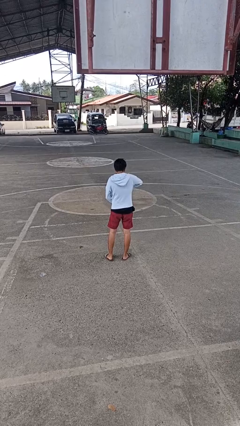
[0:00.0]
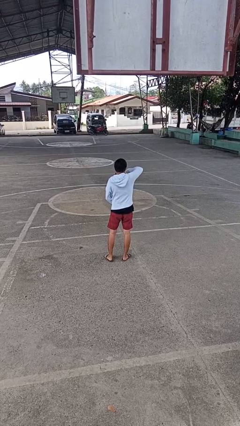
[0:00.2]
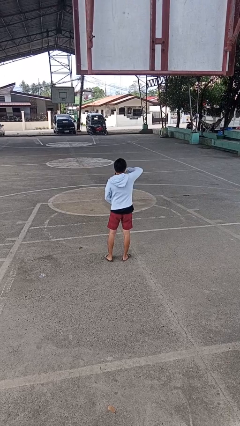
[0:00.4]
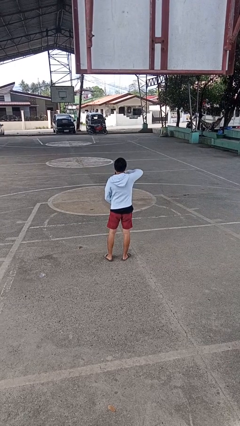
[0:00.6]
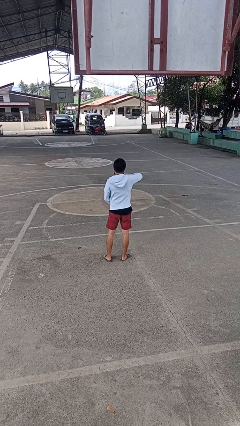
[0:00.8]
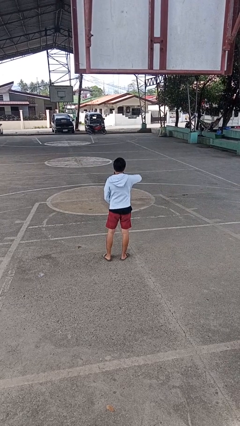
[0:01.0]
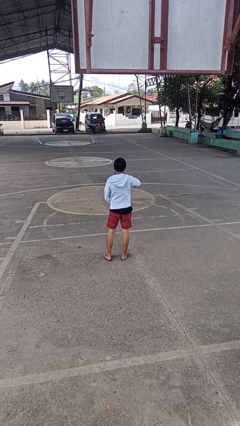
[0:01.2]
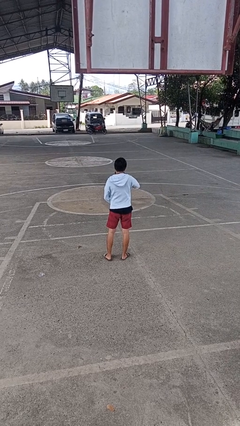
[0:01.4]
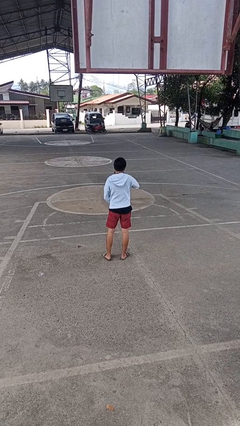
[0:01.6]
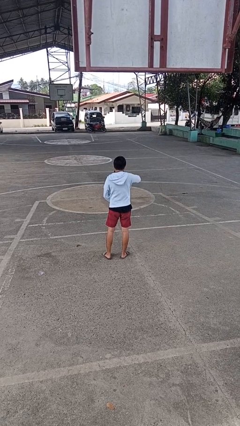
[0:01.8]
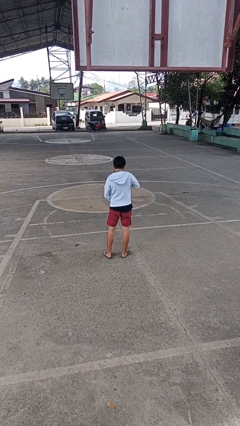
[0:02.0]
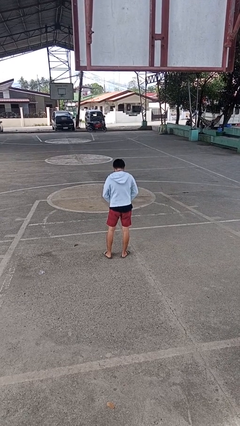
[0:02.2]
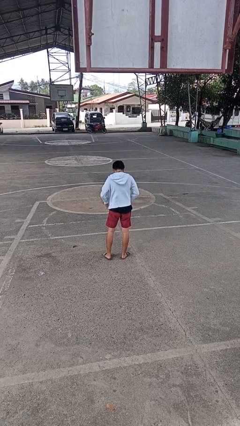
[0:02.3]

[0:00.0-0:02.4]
person zips up jacket

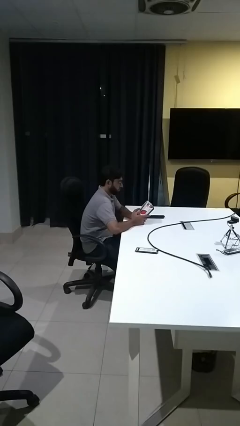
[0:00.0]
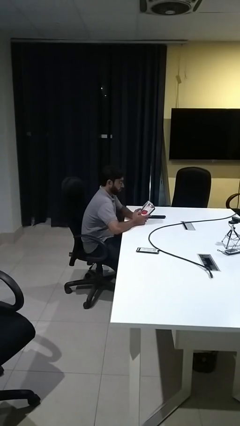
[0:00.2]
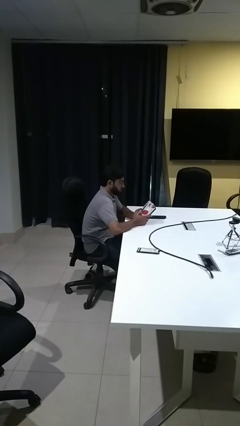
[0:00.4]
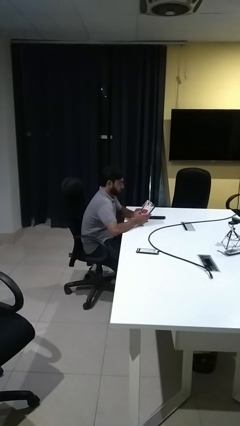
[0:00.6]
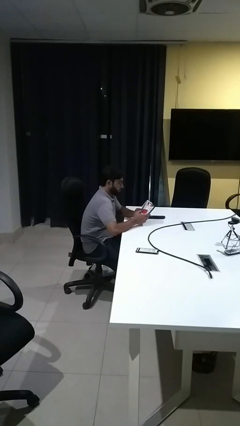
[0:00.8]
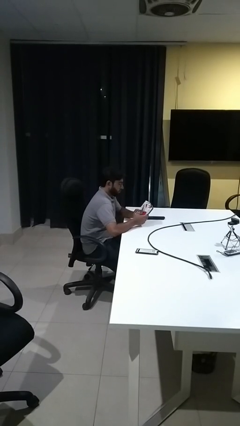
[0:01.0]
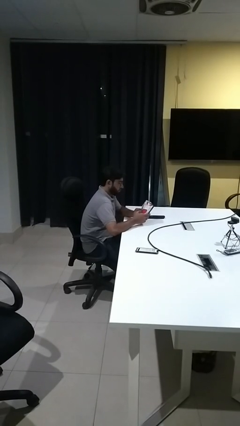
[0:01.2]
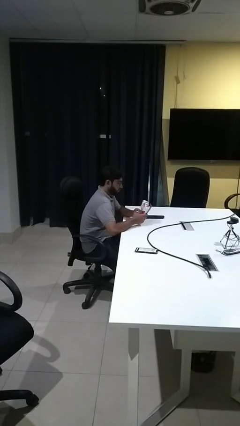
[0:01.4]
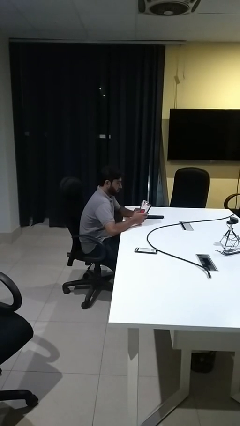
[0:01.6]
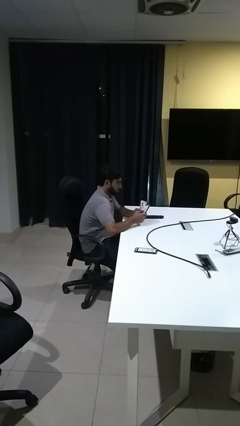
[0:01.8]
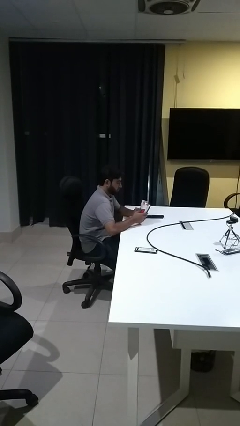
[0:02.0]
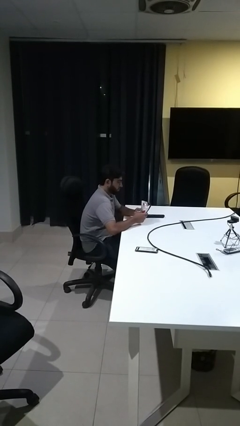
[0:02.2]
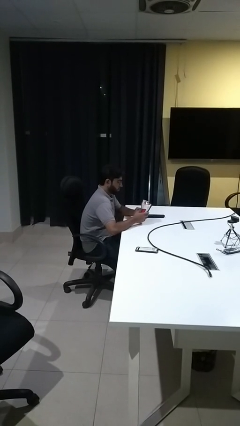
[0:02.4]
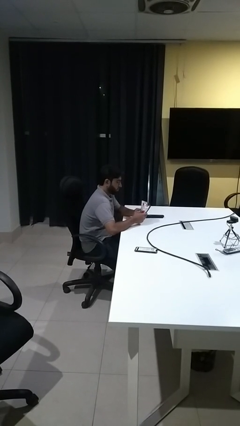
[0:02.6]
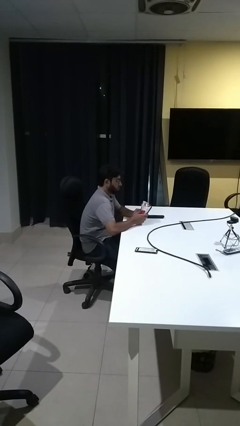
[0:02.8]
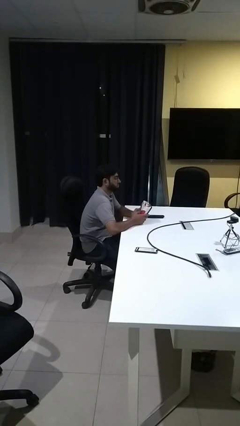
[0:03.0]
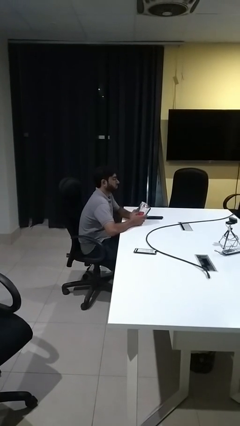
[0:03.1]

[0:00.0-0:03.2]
person squeezes object

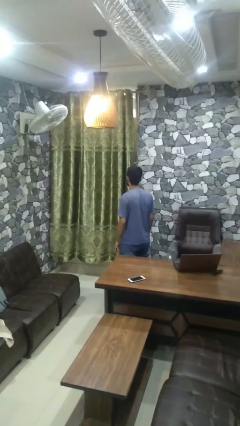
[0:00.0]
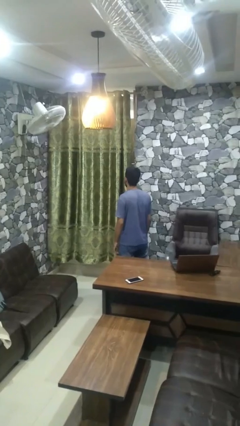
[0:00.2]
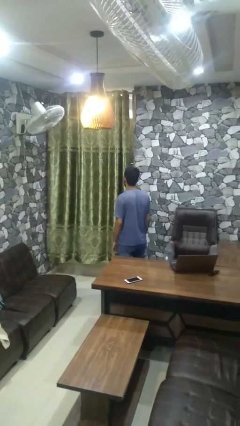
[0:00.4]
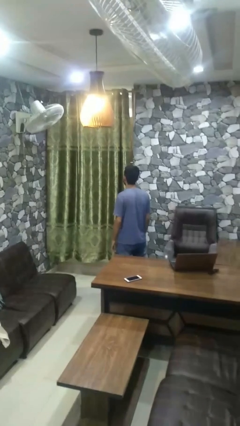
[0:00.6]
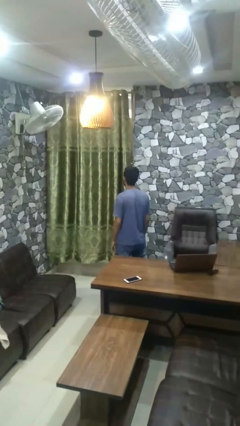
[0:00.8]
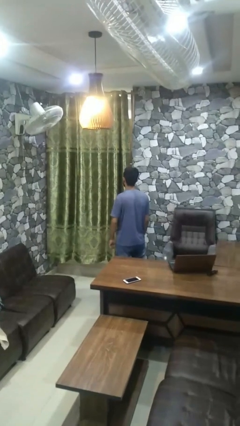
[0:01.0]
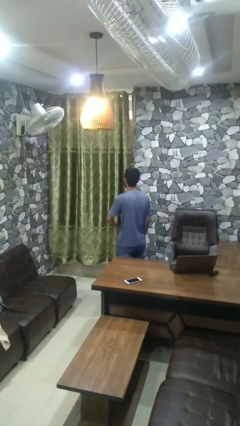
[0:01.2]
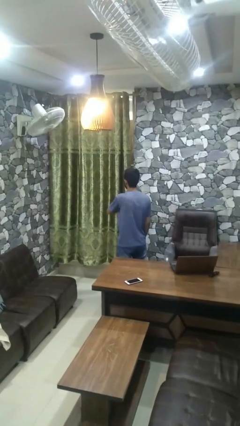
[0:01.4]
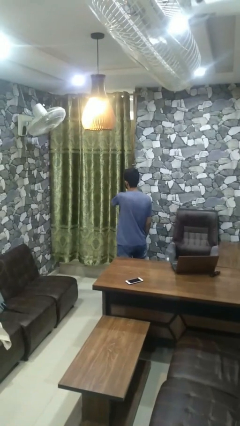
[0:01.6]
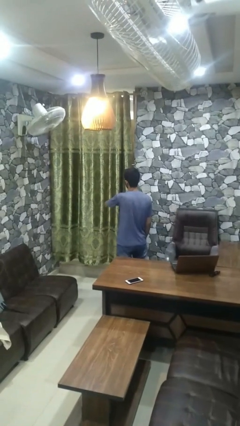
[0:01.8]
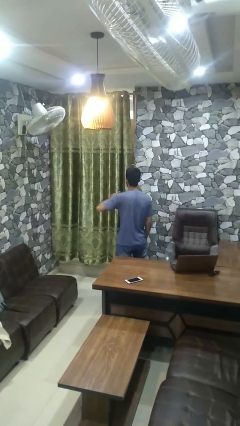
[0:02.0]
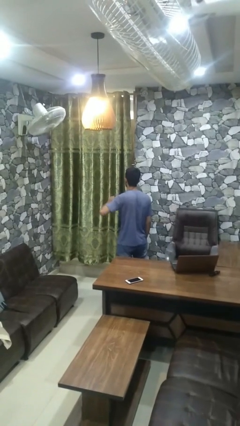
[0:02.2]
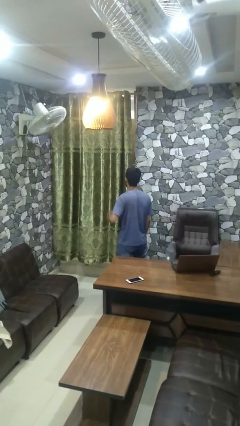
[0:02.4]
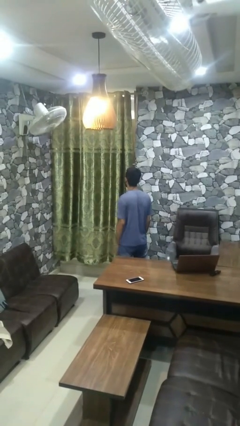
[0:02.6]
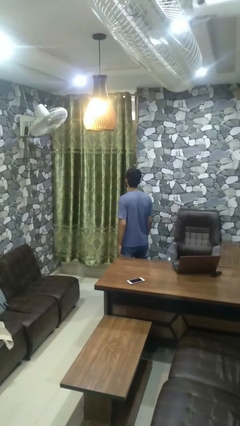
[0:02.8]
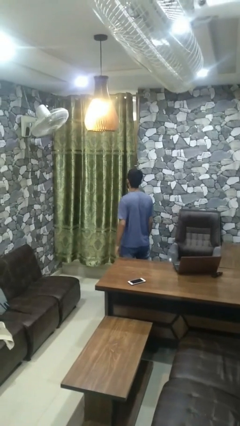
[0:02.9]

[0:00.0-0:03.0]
person gestures cut

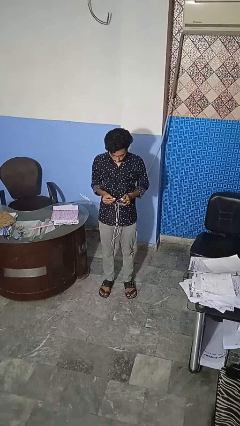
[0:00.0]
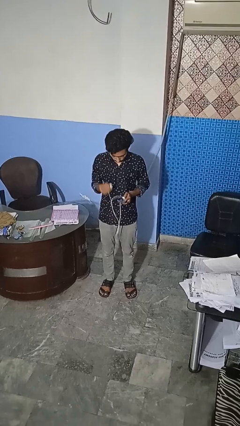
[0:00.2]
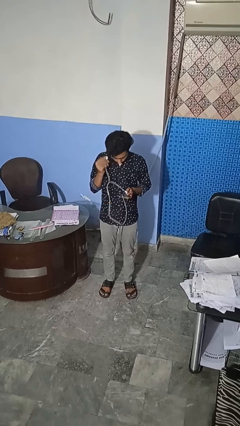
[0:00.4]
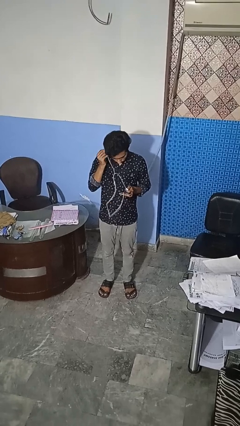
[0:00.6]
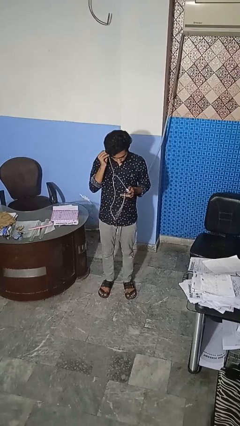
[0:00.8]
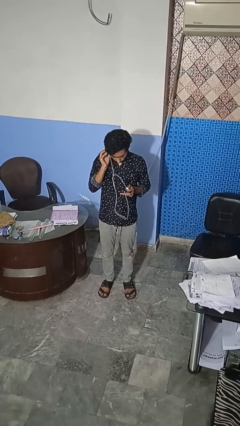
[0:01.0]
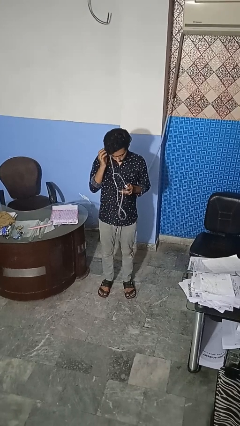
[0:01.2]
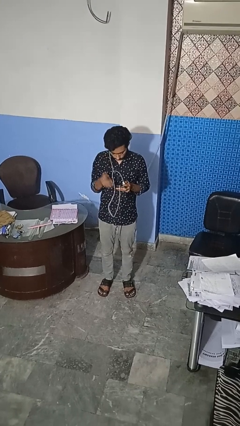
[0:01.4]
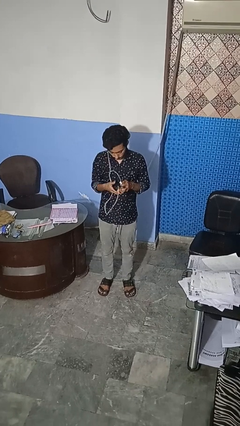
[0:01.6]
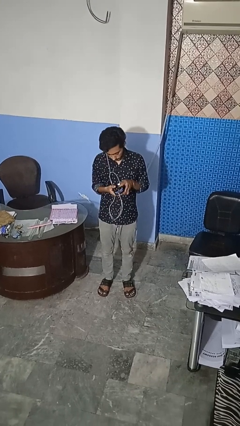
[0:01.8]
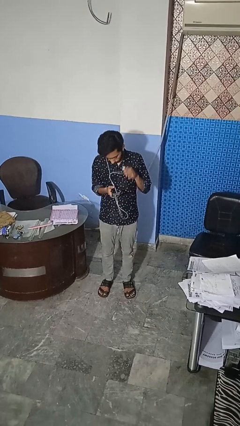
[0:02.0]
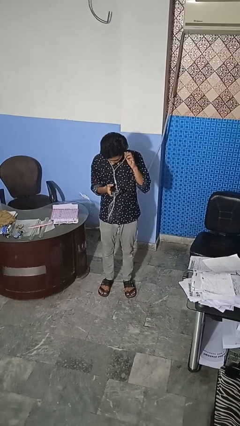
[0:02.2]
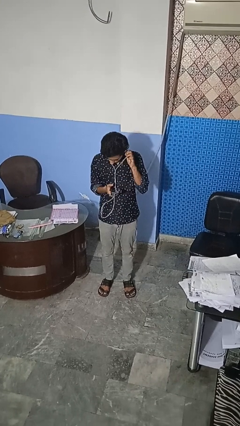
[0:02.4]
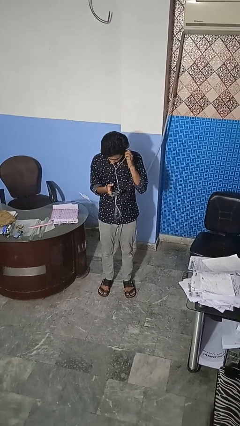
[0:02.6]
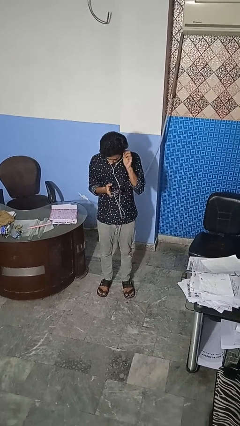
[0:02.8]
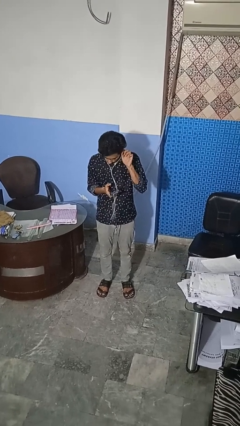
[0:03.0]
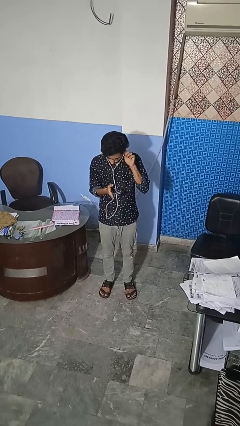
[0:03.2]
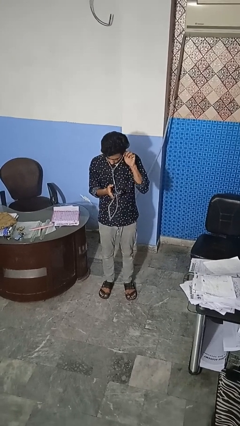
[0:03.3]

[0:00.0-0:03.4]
person puts on headphones

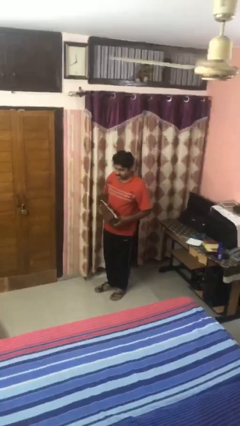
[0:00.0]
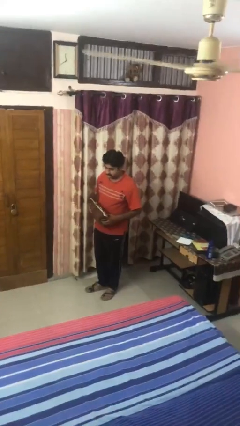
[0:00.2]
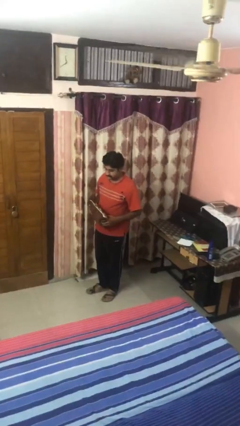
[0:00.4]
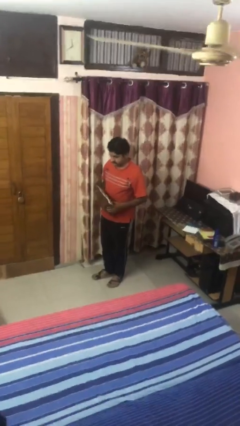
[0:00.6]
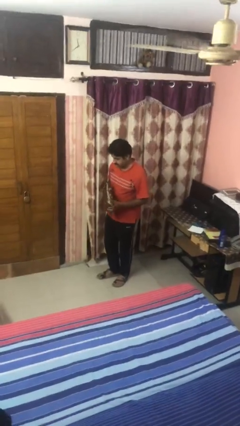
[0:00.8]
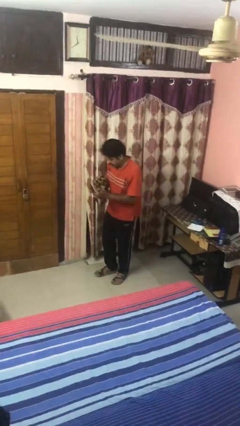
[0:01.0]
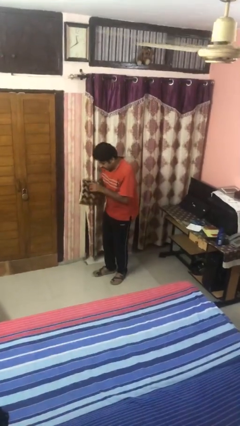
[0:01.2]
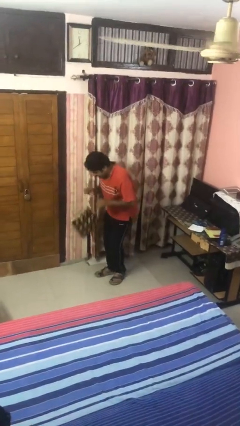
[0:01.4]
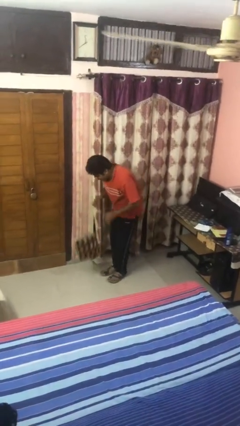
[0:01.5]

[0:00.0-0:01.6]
person drops object

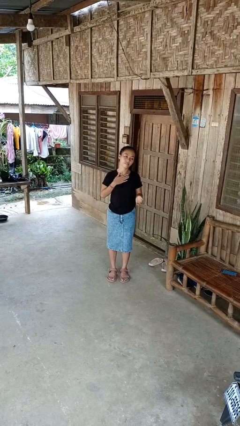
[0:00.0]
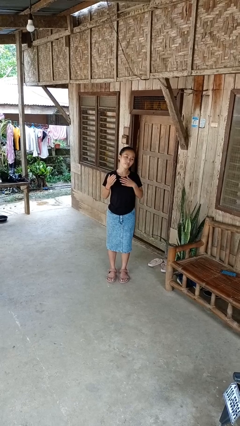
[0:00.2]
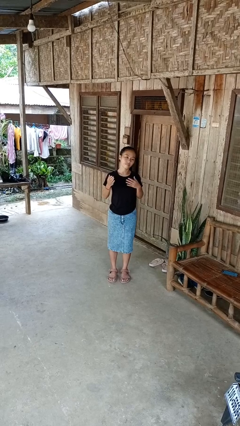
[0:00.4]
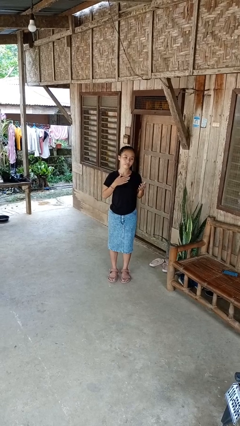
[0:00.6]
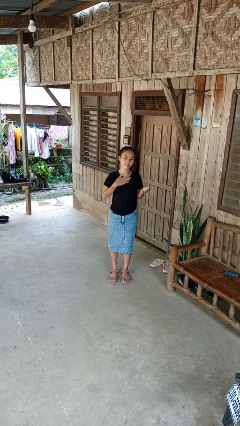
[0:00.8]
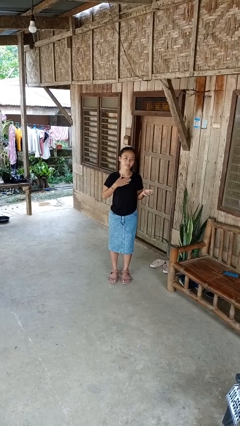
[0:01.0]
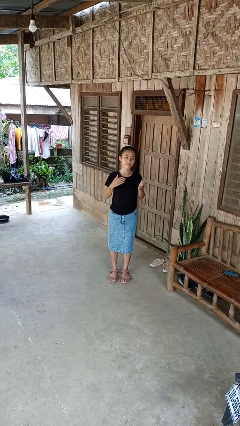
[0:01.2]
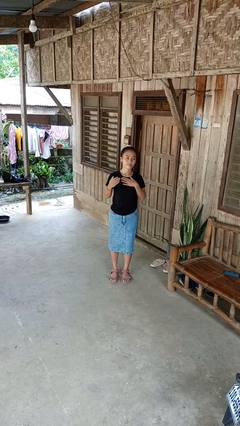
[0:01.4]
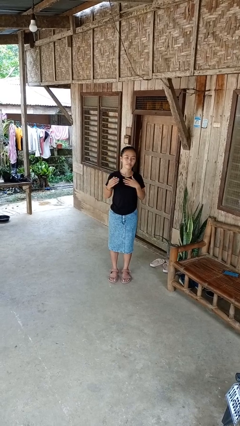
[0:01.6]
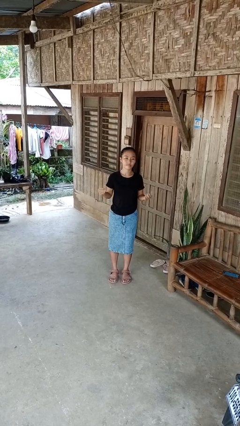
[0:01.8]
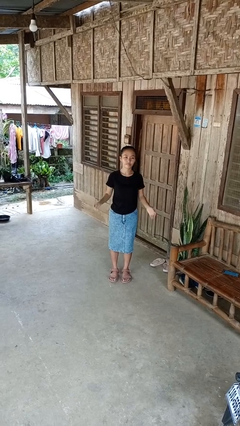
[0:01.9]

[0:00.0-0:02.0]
person drums on chest

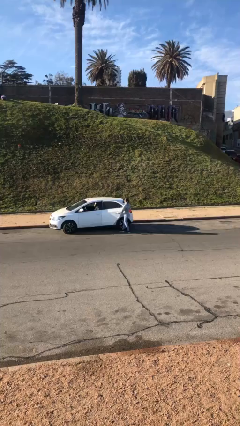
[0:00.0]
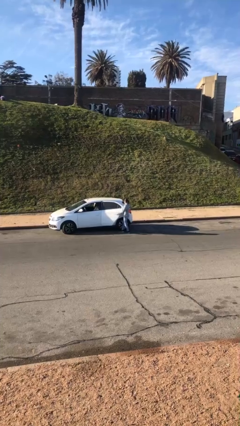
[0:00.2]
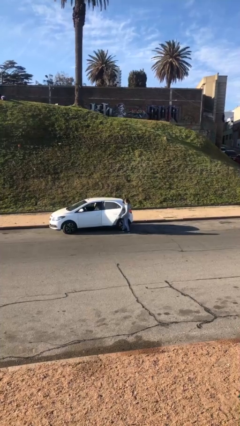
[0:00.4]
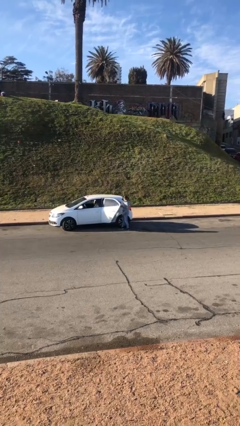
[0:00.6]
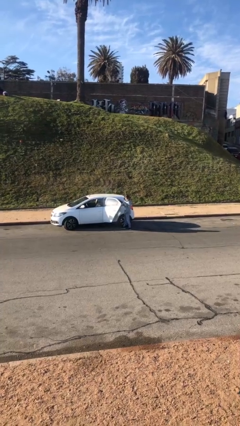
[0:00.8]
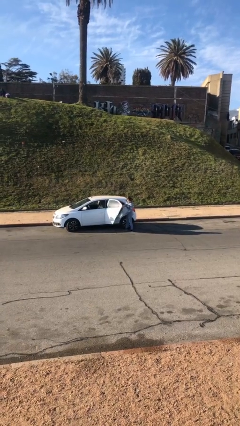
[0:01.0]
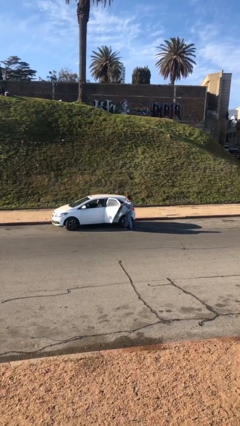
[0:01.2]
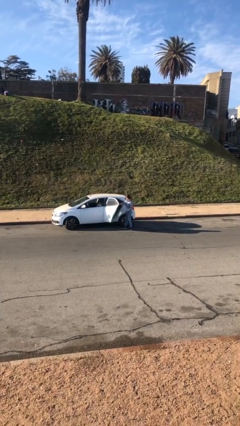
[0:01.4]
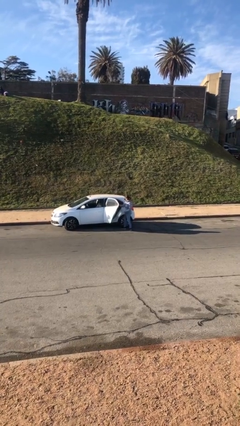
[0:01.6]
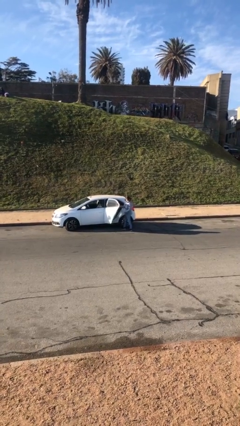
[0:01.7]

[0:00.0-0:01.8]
person opens car door

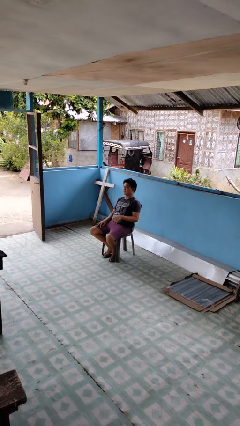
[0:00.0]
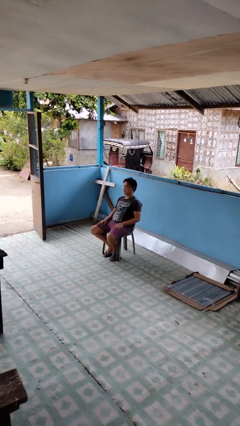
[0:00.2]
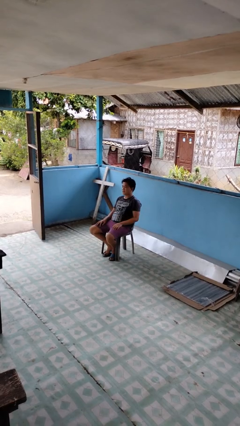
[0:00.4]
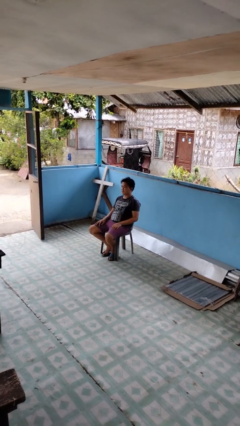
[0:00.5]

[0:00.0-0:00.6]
person gestures lower hand